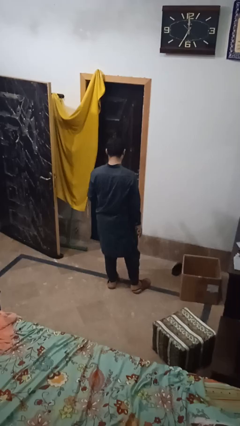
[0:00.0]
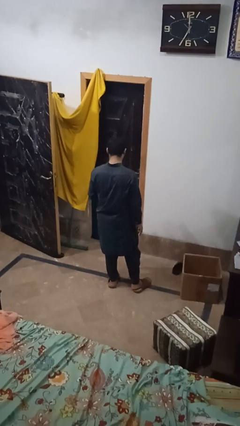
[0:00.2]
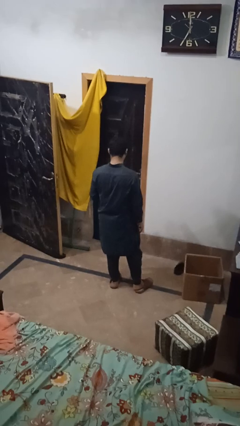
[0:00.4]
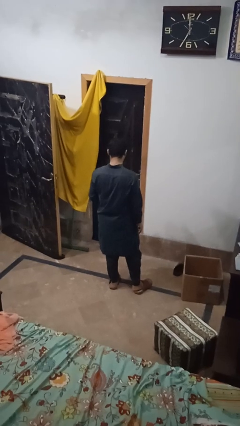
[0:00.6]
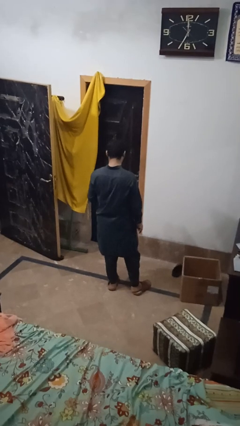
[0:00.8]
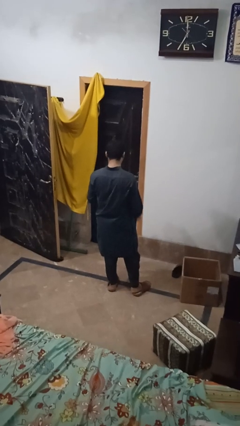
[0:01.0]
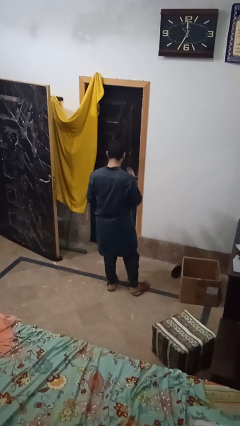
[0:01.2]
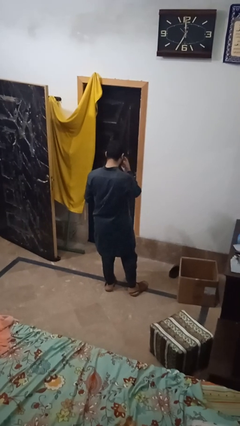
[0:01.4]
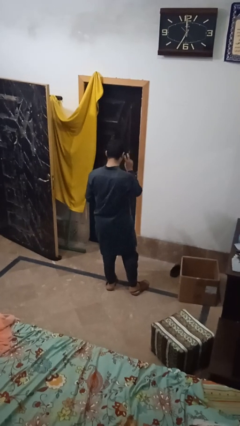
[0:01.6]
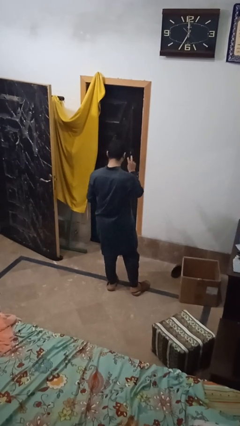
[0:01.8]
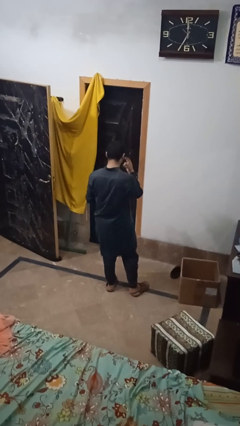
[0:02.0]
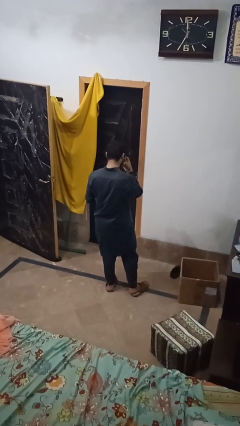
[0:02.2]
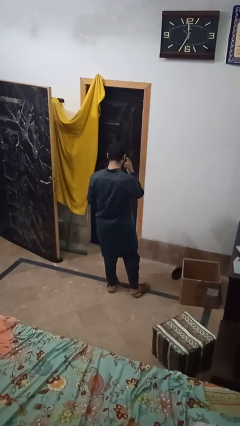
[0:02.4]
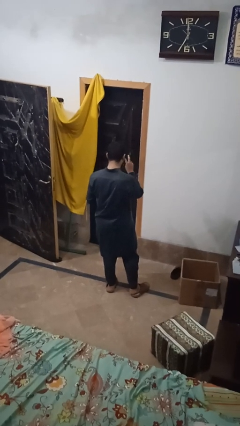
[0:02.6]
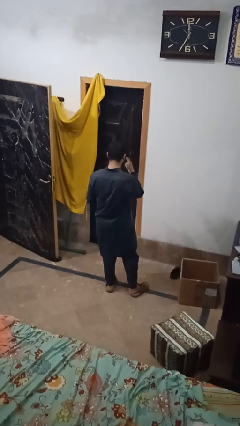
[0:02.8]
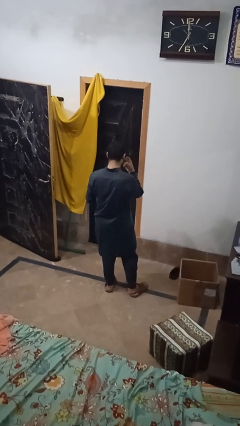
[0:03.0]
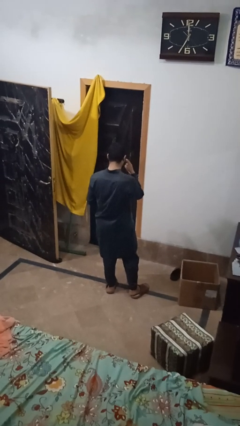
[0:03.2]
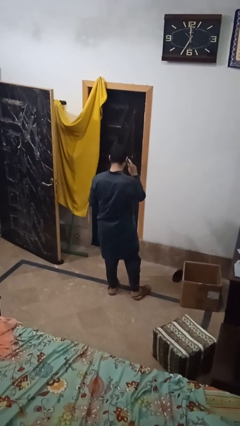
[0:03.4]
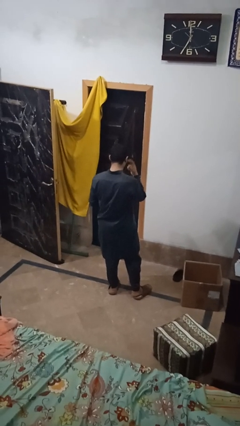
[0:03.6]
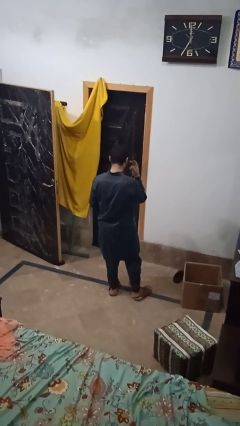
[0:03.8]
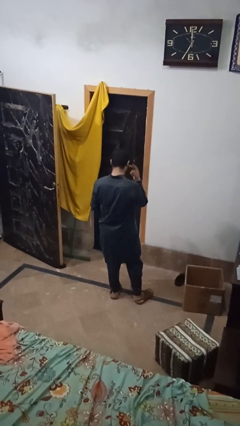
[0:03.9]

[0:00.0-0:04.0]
person gestures watch closely

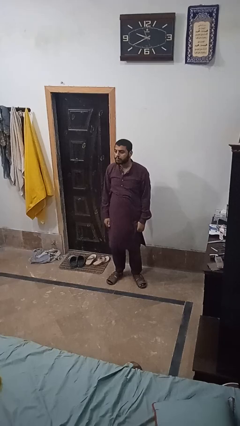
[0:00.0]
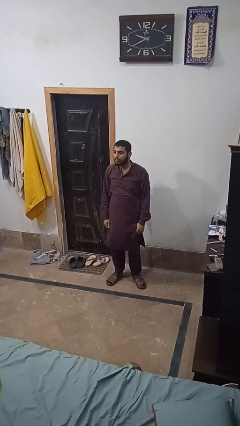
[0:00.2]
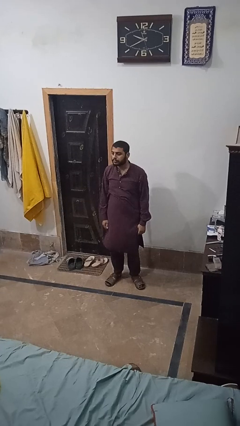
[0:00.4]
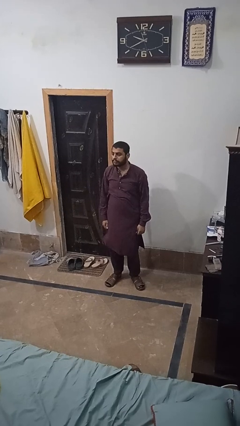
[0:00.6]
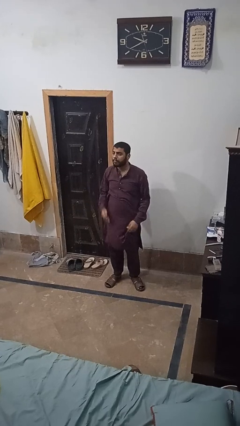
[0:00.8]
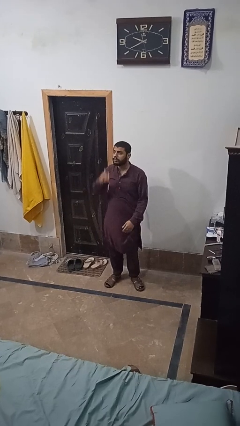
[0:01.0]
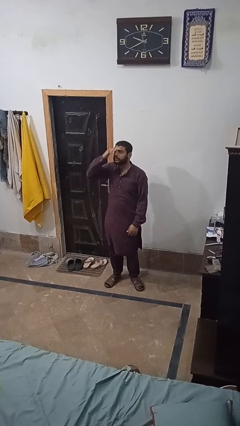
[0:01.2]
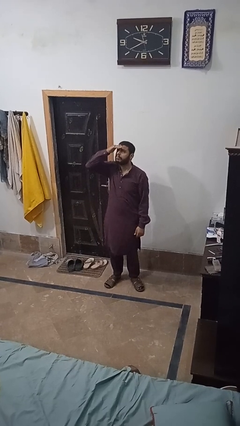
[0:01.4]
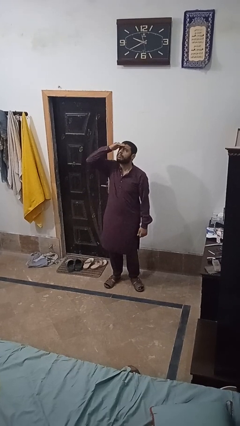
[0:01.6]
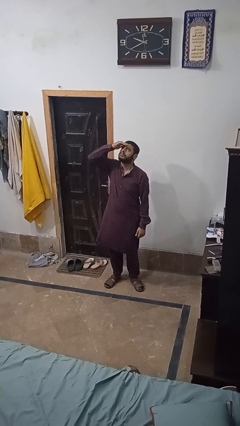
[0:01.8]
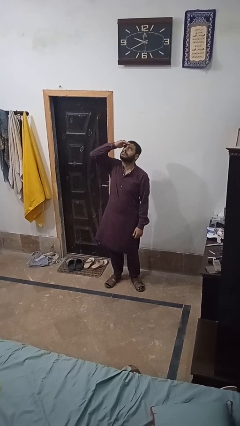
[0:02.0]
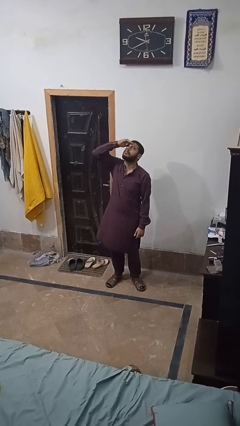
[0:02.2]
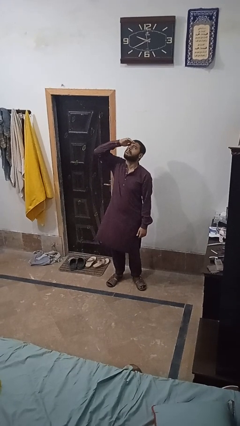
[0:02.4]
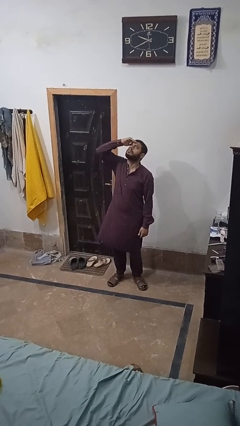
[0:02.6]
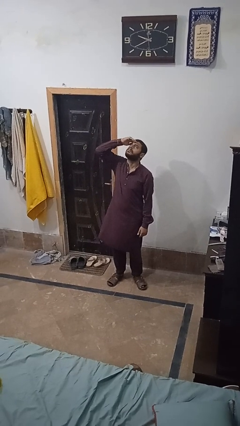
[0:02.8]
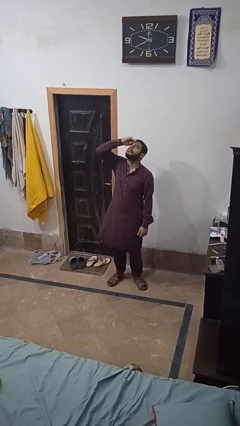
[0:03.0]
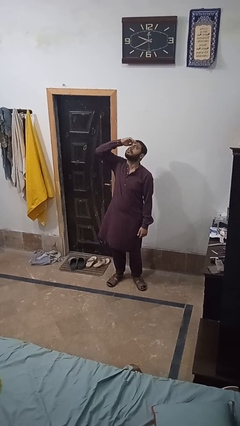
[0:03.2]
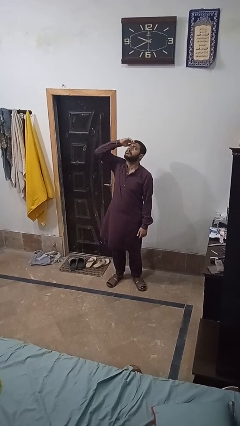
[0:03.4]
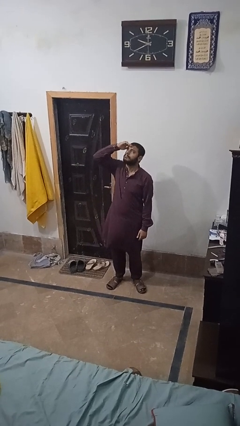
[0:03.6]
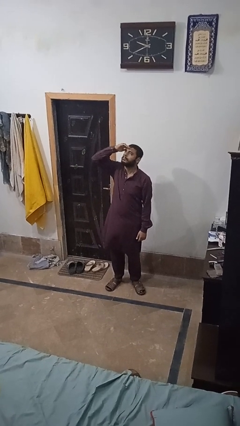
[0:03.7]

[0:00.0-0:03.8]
person shades eyes

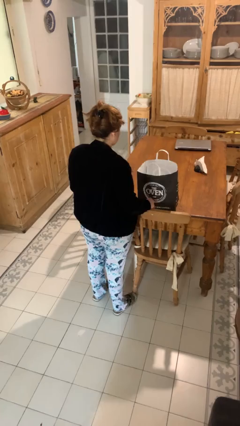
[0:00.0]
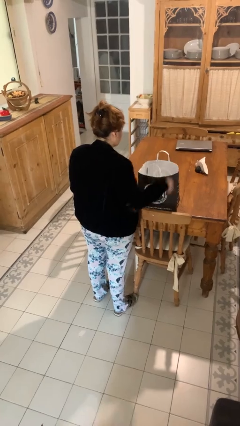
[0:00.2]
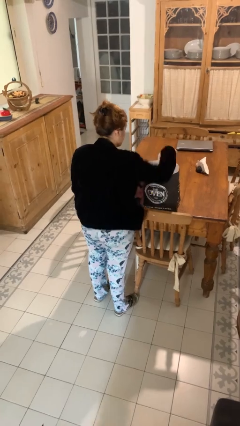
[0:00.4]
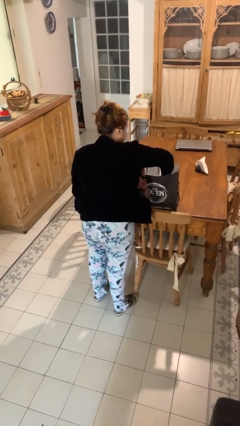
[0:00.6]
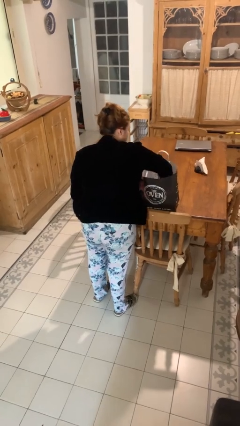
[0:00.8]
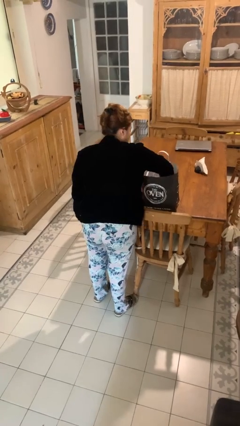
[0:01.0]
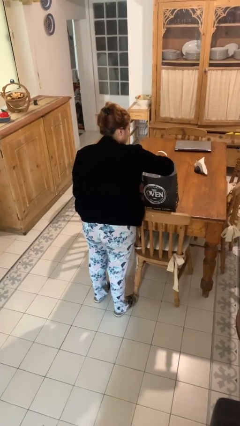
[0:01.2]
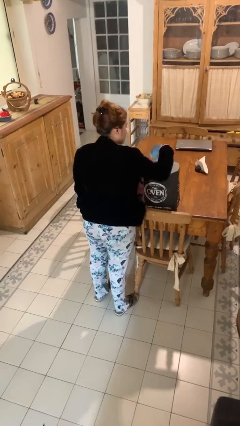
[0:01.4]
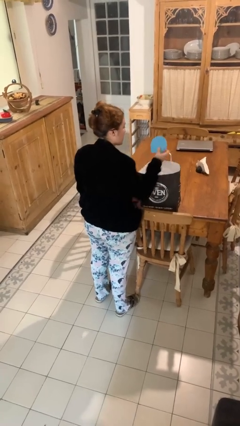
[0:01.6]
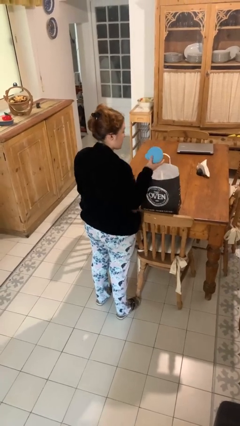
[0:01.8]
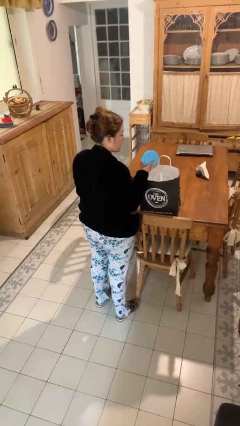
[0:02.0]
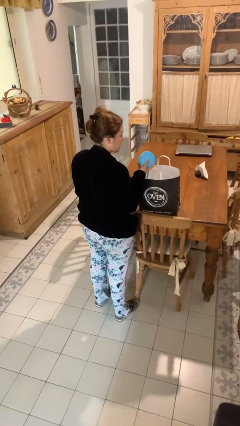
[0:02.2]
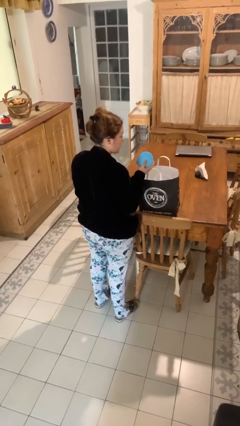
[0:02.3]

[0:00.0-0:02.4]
person takes object from bag

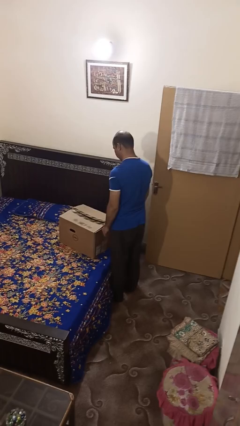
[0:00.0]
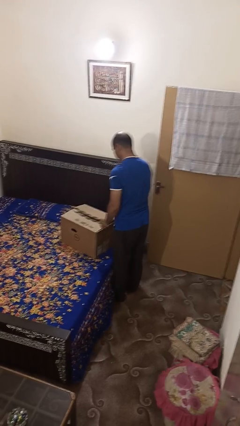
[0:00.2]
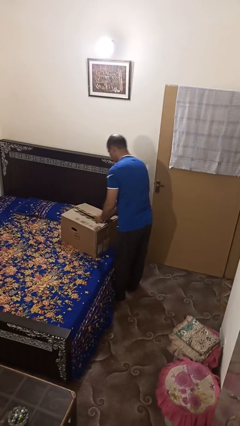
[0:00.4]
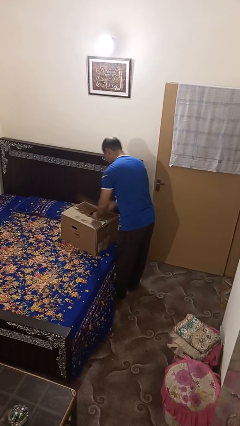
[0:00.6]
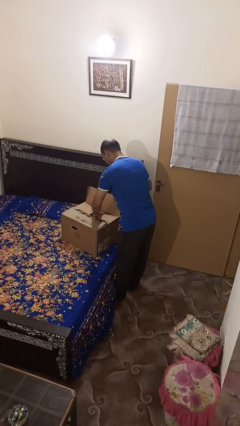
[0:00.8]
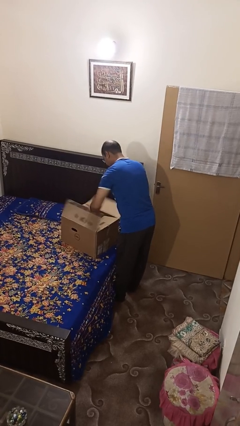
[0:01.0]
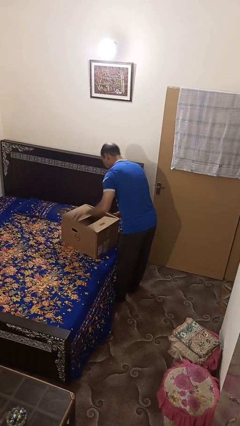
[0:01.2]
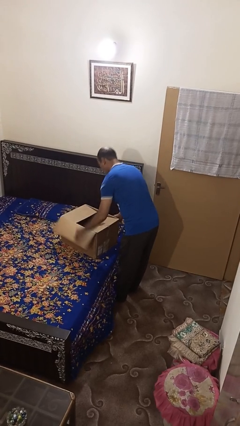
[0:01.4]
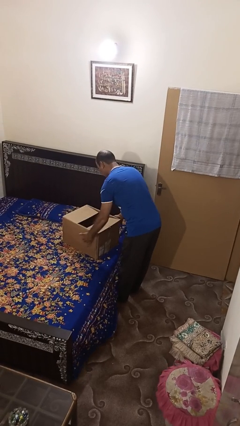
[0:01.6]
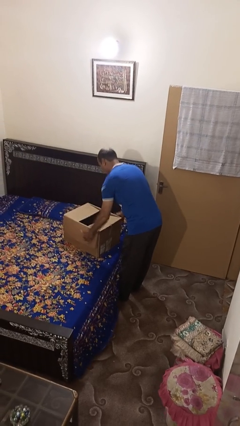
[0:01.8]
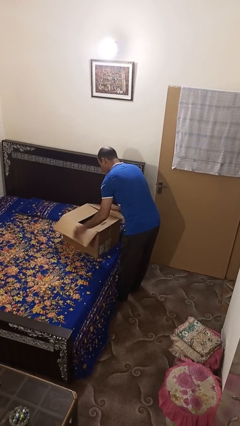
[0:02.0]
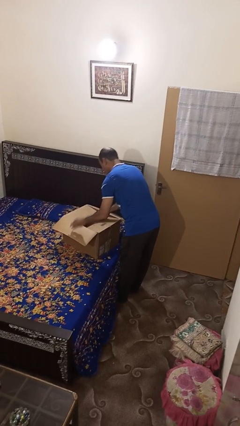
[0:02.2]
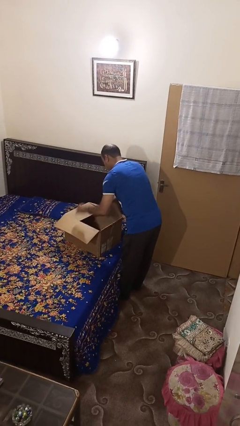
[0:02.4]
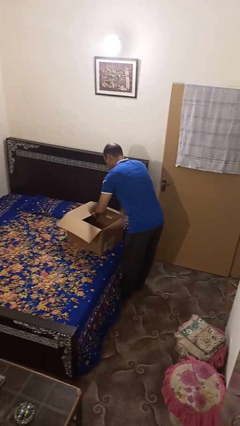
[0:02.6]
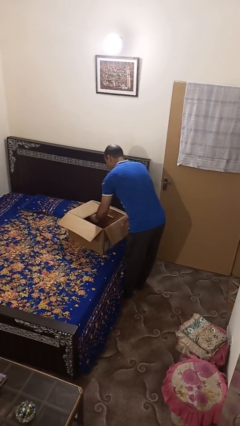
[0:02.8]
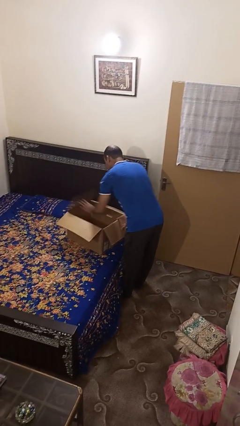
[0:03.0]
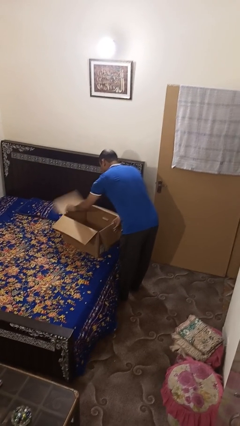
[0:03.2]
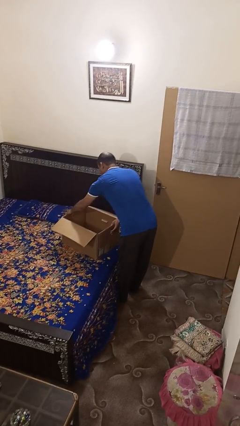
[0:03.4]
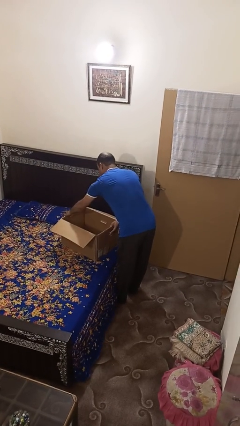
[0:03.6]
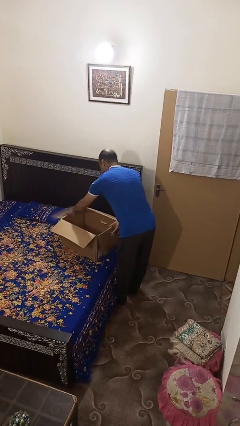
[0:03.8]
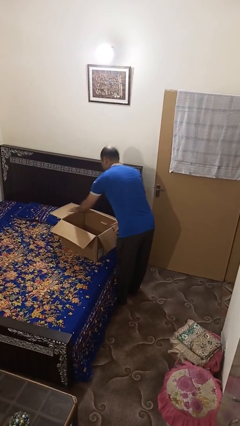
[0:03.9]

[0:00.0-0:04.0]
person opens box

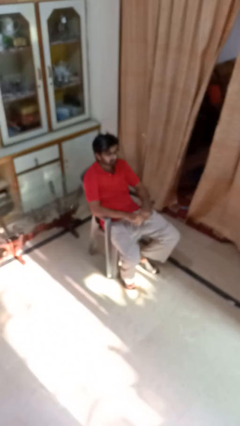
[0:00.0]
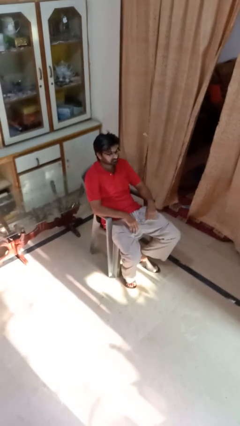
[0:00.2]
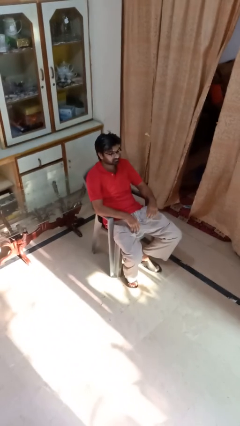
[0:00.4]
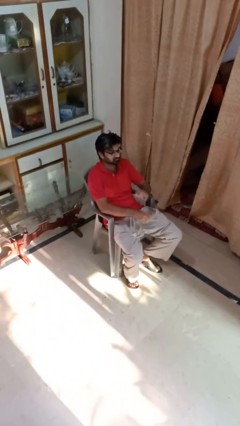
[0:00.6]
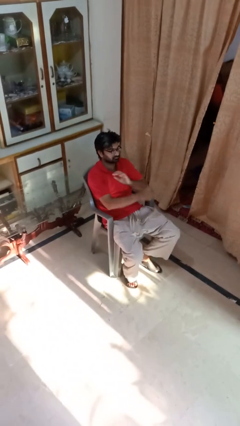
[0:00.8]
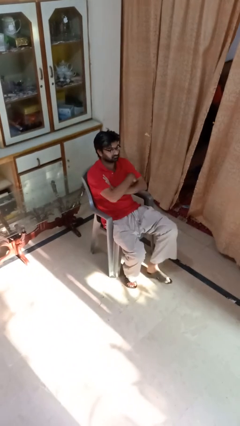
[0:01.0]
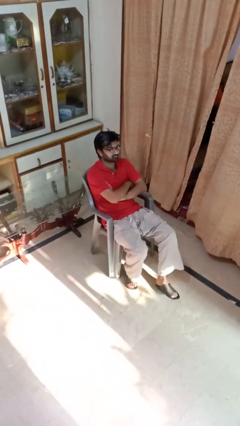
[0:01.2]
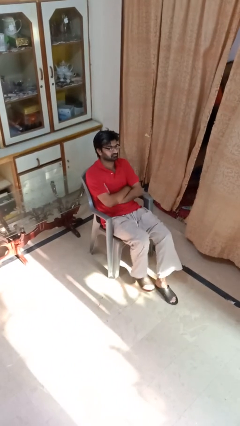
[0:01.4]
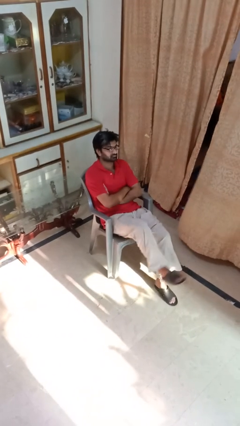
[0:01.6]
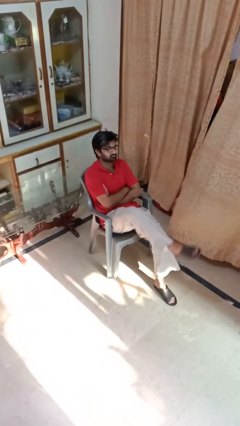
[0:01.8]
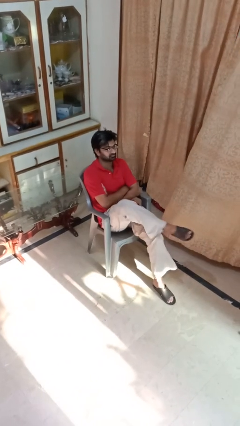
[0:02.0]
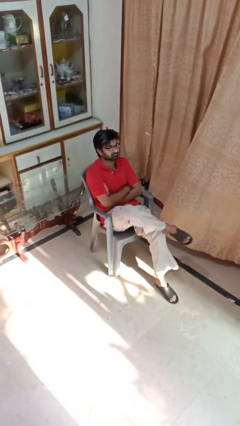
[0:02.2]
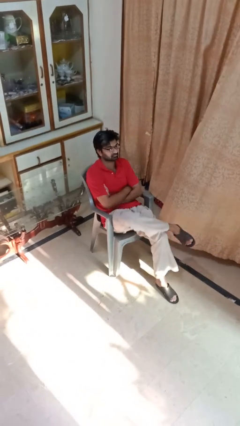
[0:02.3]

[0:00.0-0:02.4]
person crosses arms

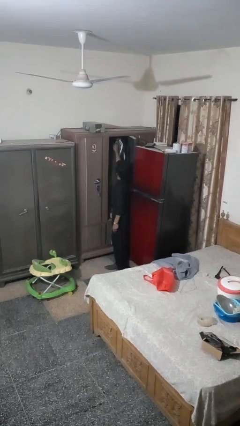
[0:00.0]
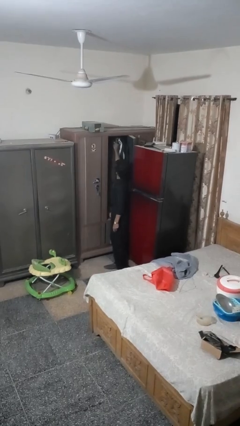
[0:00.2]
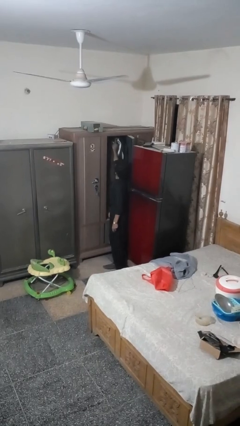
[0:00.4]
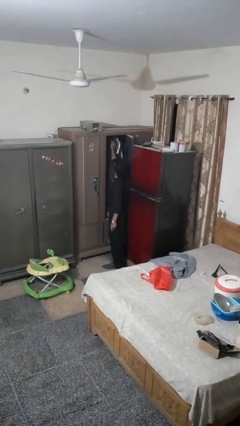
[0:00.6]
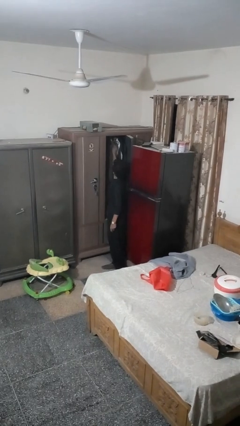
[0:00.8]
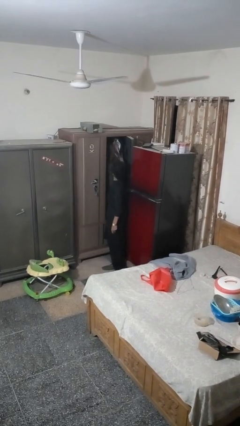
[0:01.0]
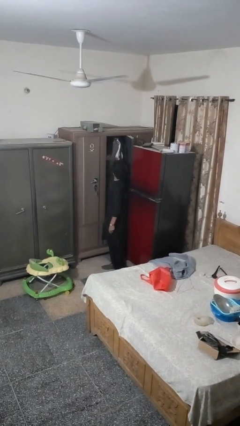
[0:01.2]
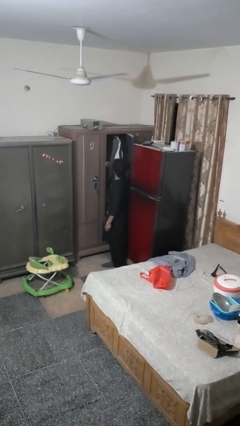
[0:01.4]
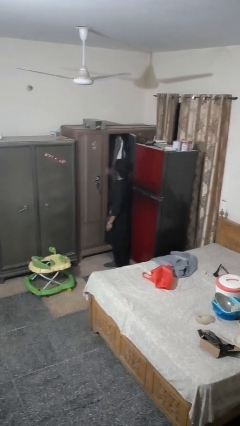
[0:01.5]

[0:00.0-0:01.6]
person takes clothes from closet
